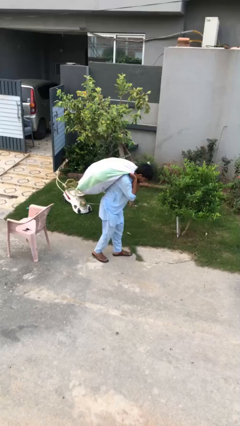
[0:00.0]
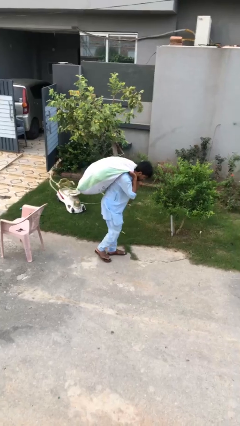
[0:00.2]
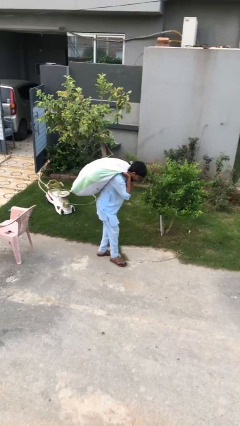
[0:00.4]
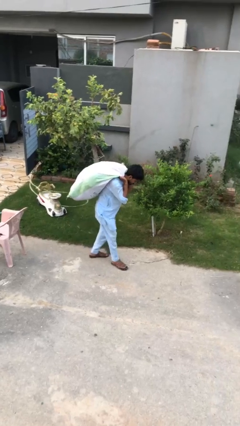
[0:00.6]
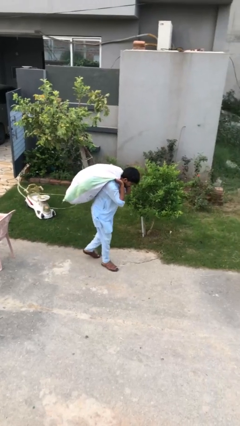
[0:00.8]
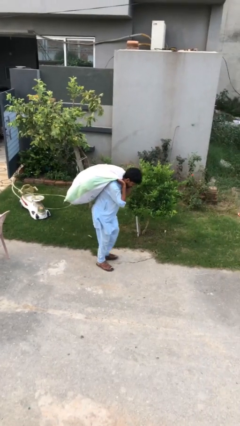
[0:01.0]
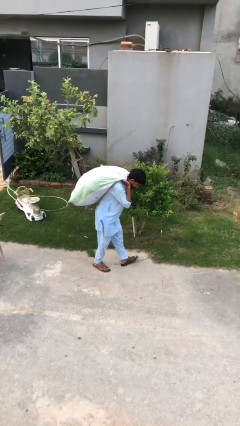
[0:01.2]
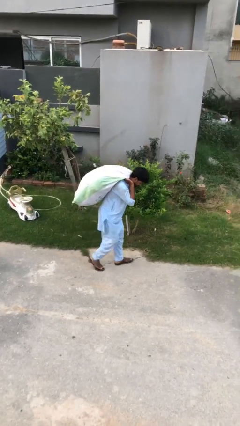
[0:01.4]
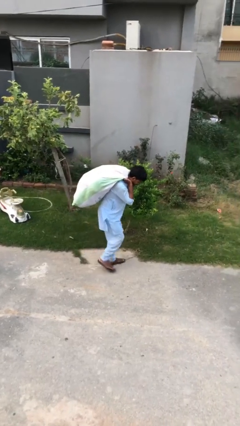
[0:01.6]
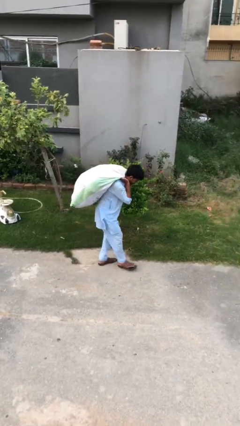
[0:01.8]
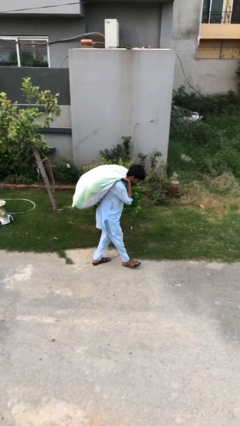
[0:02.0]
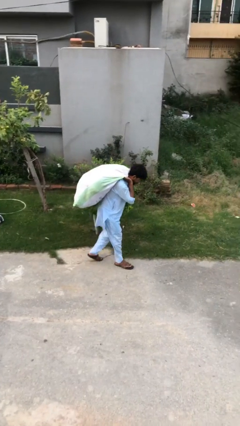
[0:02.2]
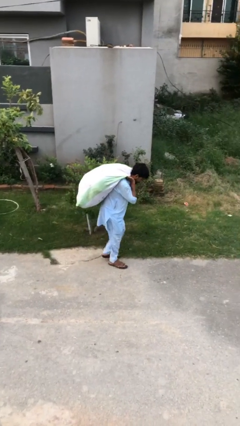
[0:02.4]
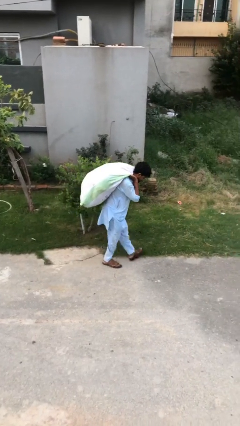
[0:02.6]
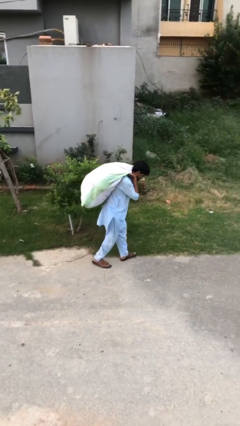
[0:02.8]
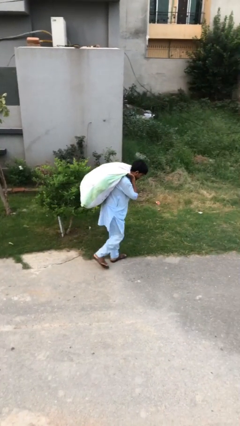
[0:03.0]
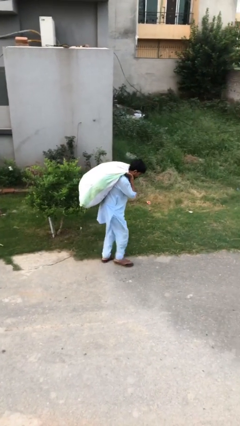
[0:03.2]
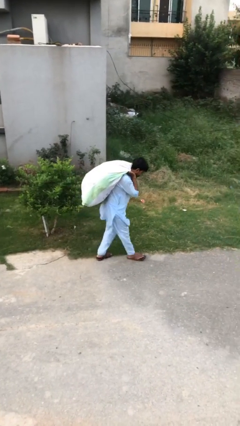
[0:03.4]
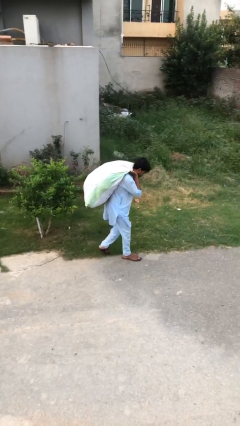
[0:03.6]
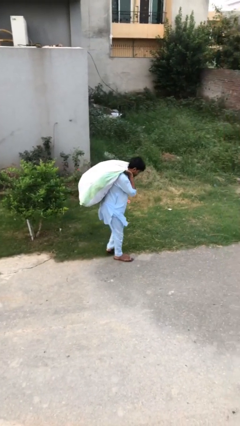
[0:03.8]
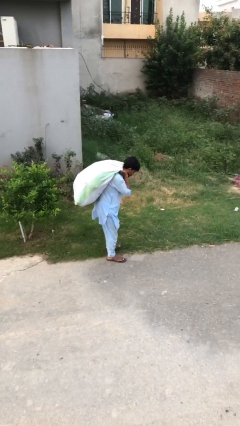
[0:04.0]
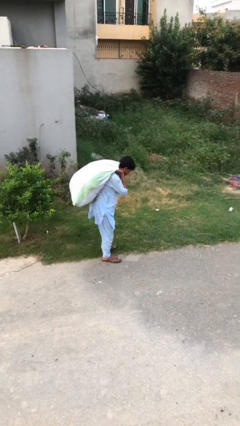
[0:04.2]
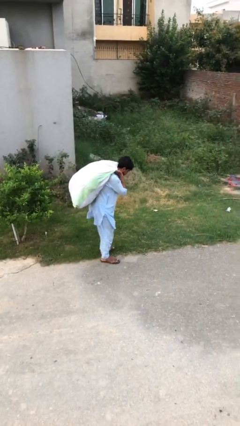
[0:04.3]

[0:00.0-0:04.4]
person carries heavy object

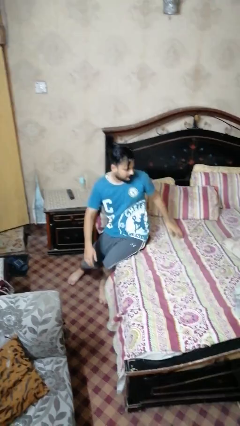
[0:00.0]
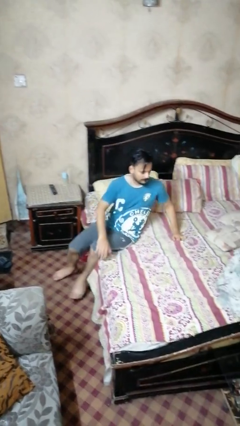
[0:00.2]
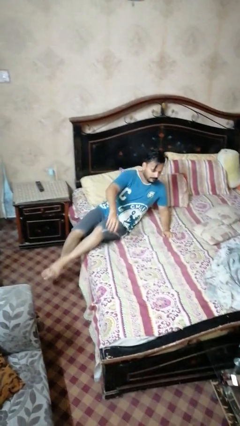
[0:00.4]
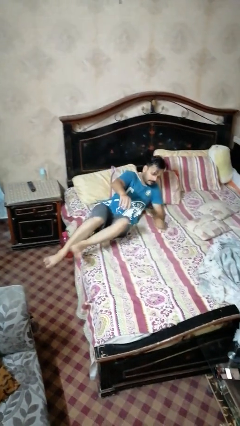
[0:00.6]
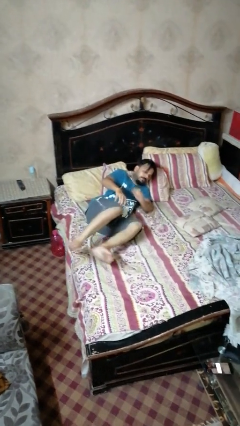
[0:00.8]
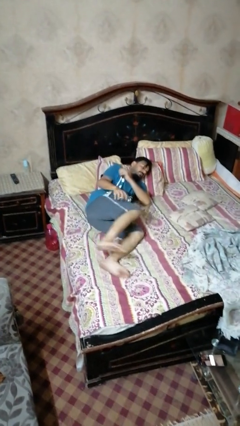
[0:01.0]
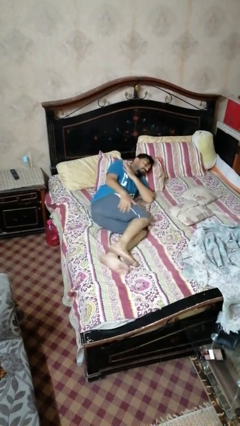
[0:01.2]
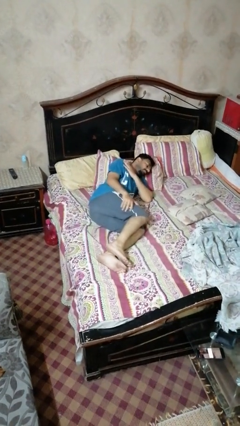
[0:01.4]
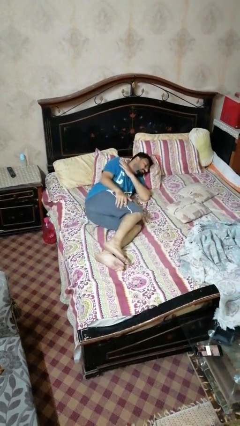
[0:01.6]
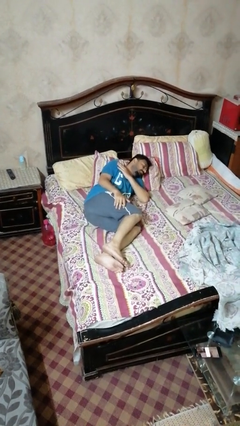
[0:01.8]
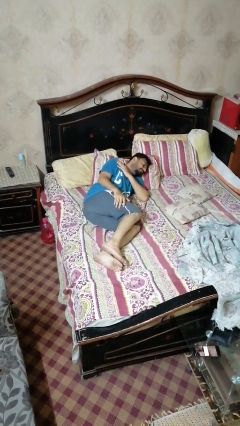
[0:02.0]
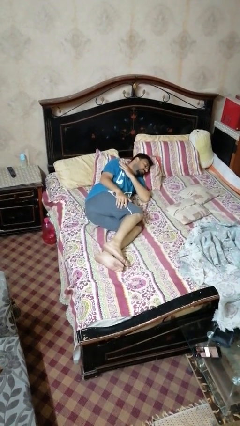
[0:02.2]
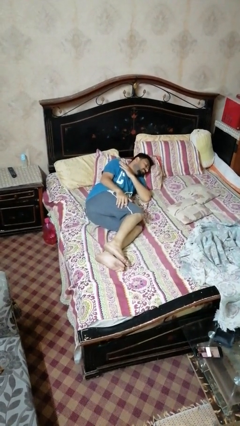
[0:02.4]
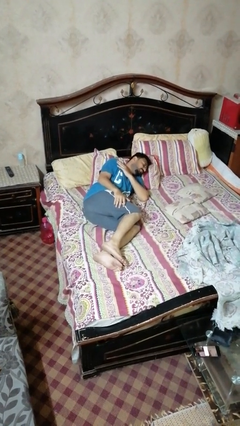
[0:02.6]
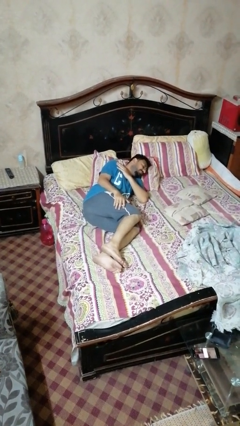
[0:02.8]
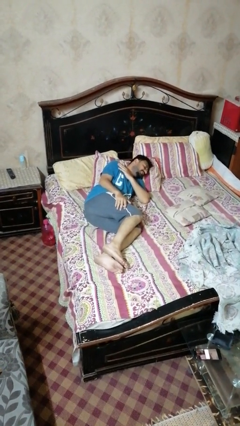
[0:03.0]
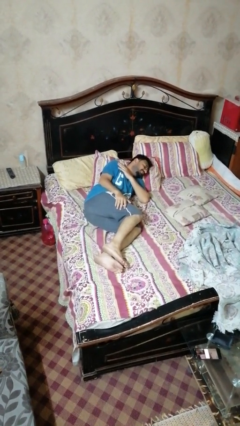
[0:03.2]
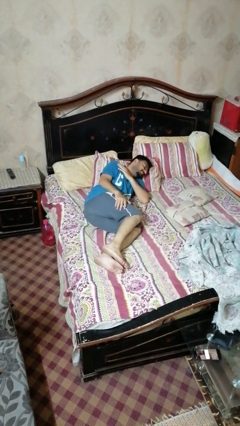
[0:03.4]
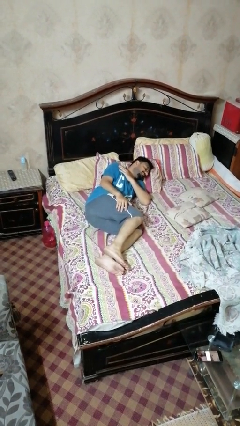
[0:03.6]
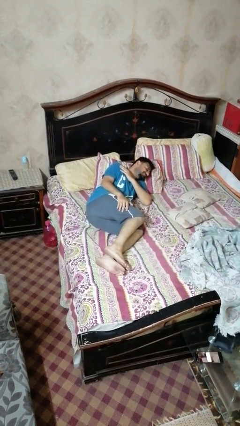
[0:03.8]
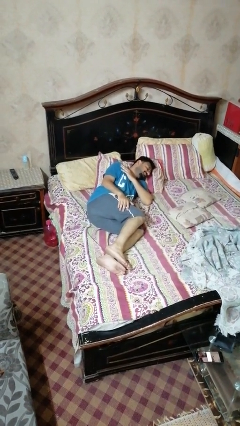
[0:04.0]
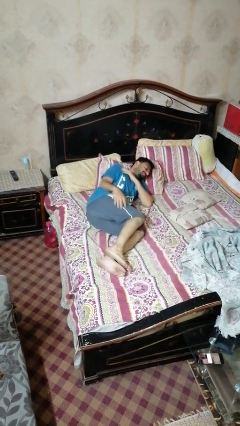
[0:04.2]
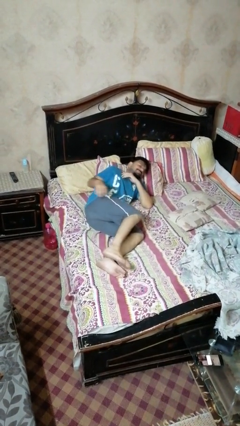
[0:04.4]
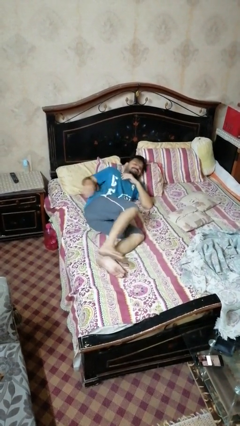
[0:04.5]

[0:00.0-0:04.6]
person lies down on bed

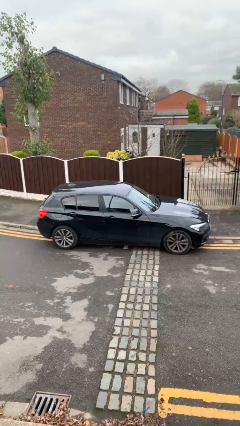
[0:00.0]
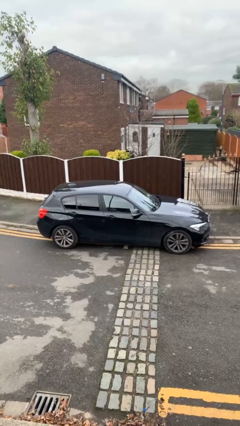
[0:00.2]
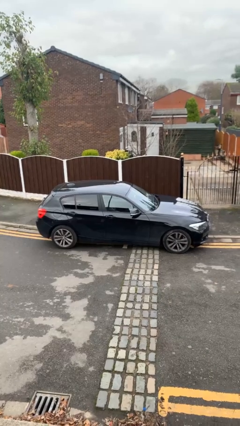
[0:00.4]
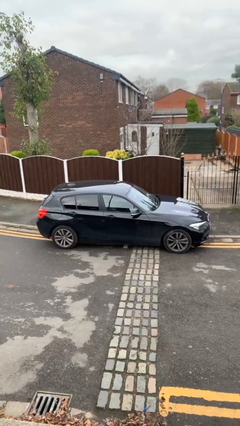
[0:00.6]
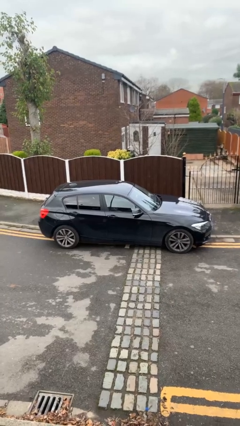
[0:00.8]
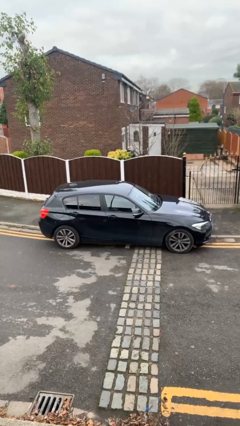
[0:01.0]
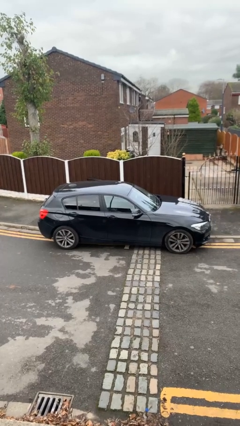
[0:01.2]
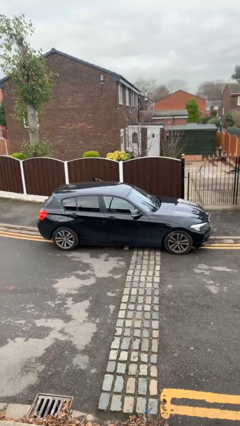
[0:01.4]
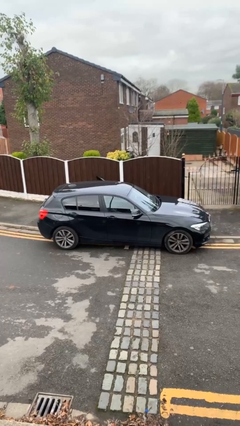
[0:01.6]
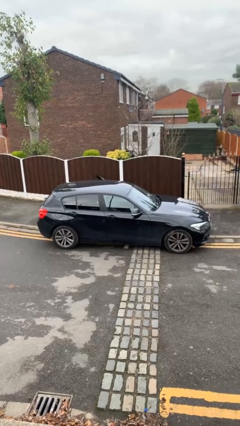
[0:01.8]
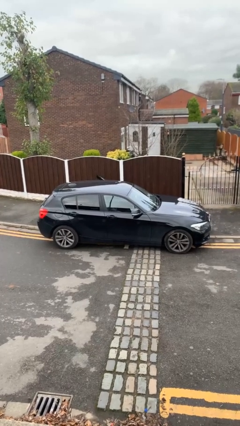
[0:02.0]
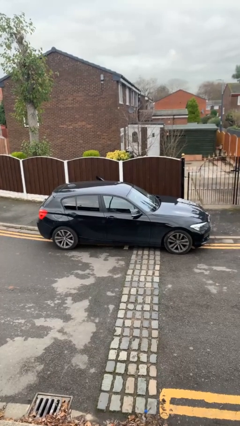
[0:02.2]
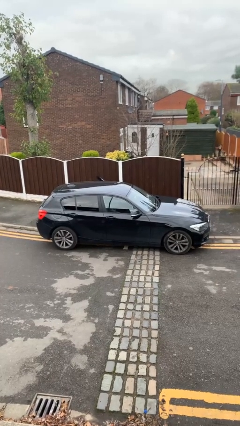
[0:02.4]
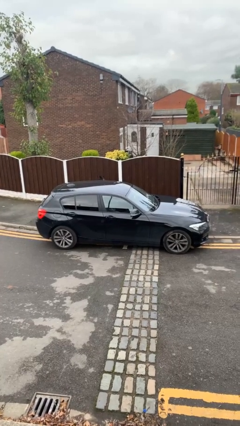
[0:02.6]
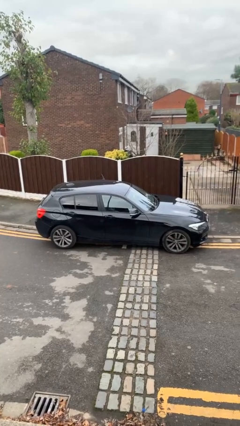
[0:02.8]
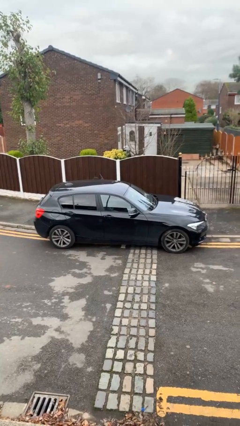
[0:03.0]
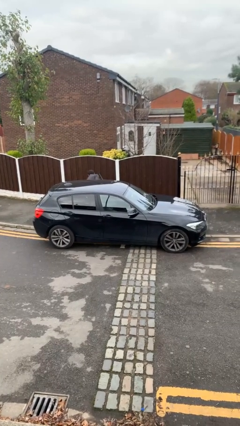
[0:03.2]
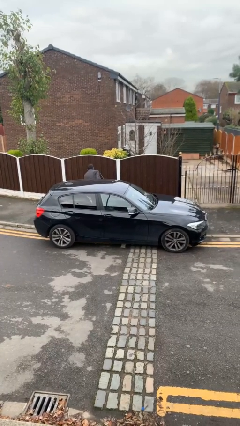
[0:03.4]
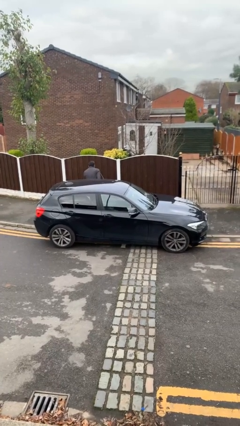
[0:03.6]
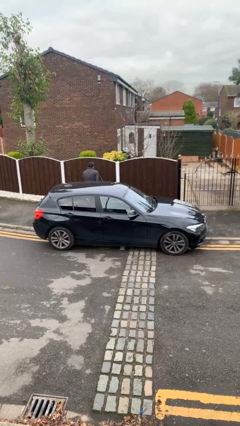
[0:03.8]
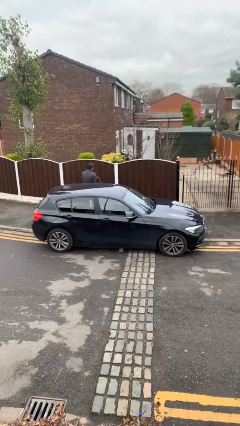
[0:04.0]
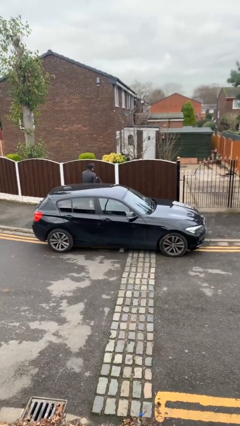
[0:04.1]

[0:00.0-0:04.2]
car drops off person

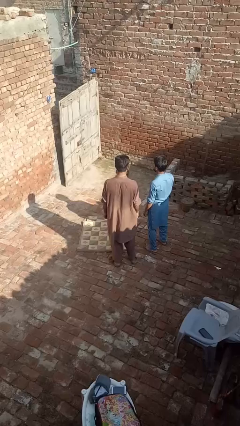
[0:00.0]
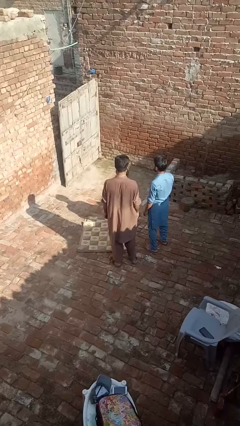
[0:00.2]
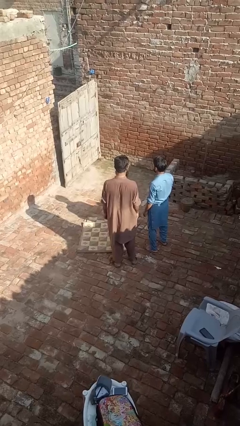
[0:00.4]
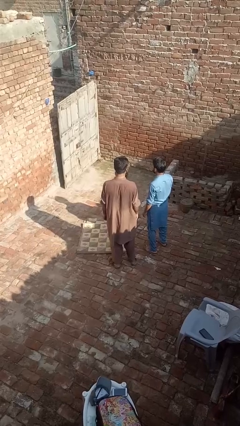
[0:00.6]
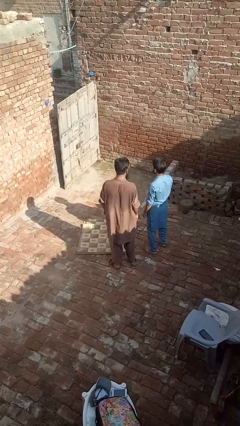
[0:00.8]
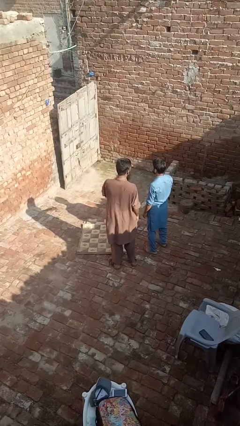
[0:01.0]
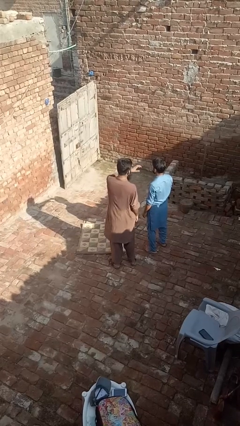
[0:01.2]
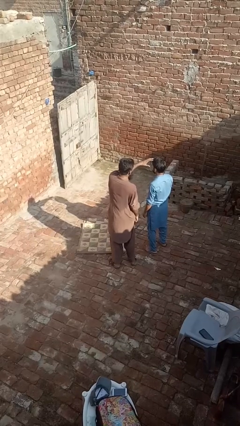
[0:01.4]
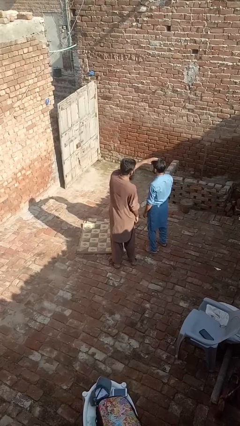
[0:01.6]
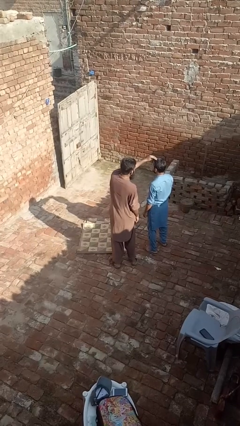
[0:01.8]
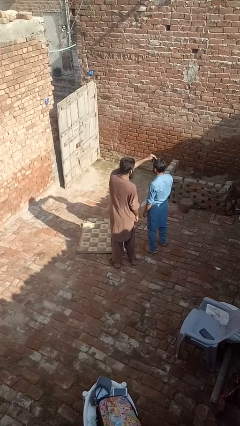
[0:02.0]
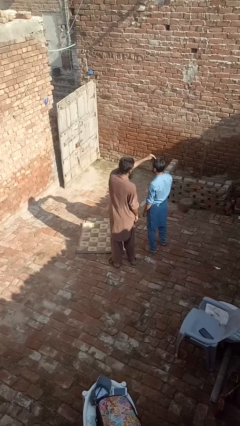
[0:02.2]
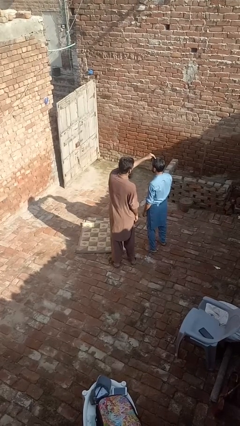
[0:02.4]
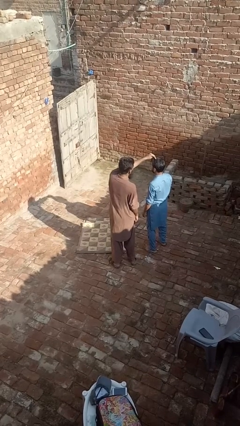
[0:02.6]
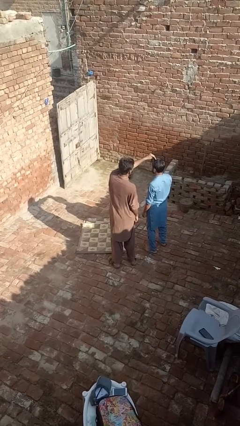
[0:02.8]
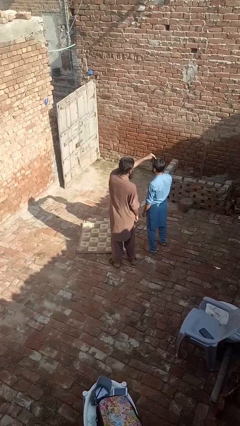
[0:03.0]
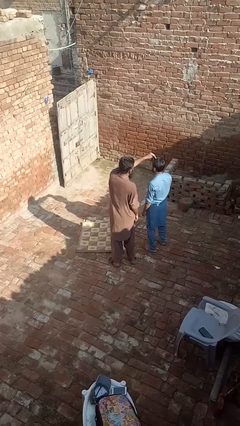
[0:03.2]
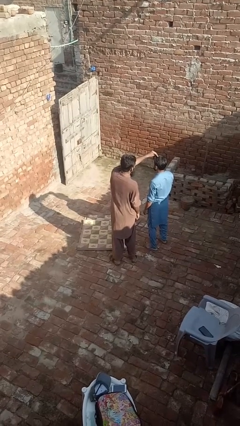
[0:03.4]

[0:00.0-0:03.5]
person grabs person by hair

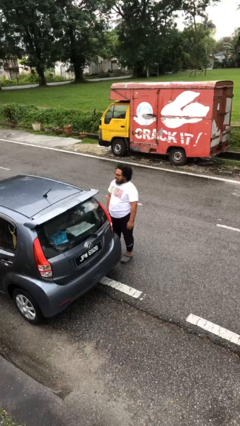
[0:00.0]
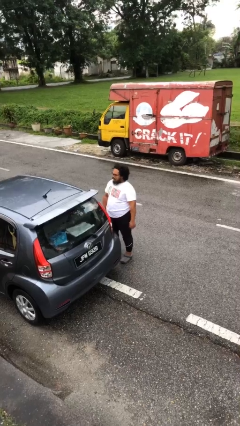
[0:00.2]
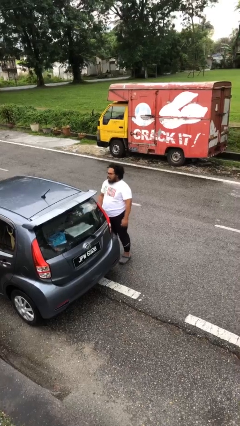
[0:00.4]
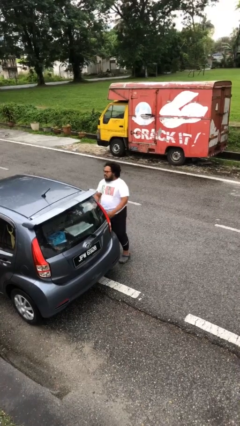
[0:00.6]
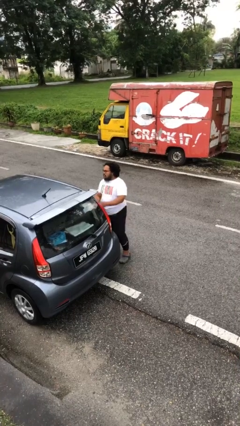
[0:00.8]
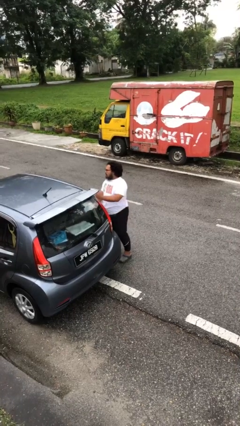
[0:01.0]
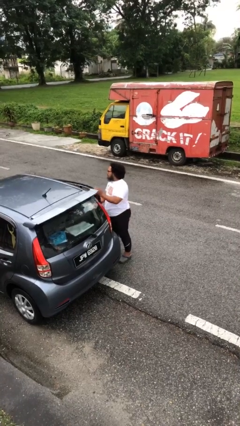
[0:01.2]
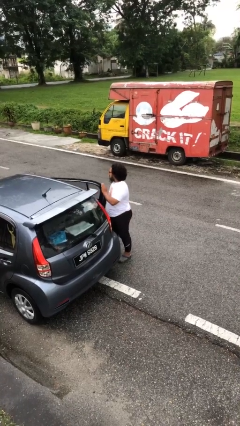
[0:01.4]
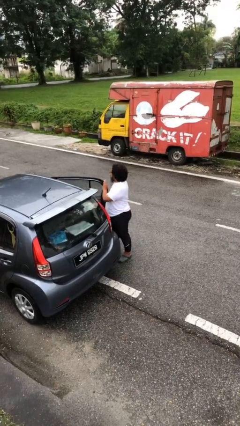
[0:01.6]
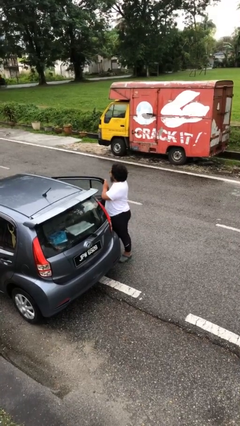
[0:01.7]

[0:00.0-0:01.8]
person opens car door
